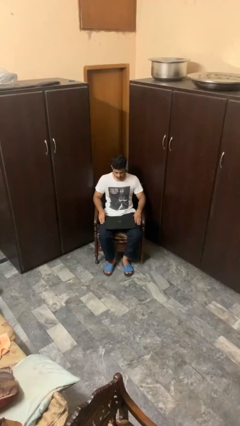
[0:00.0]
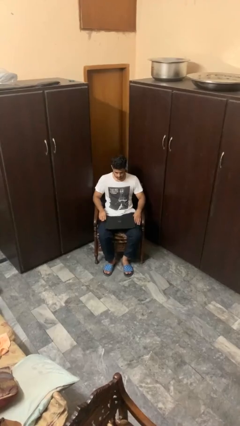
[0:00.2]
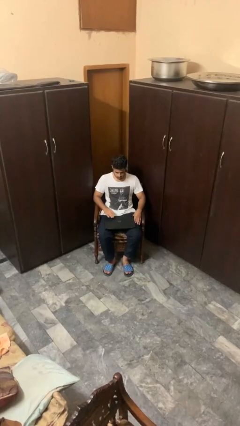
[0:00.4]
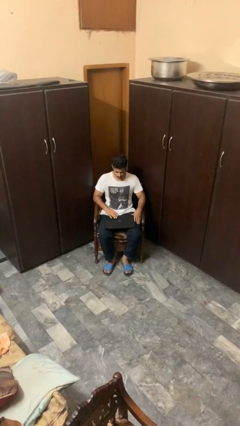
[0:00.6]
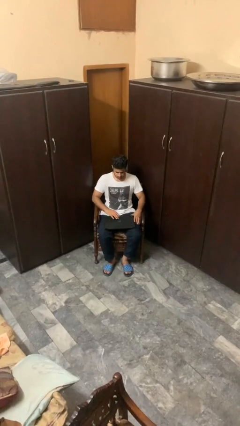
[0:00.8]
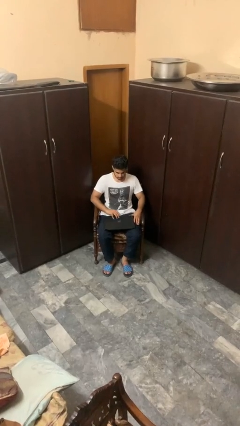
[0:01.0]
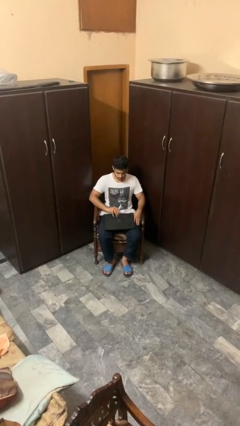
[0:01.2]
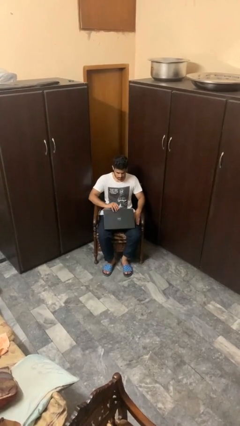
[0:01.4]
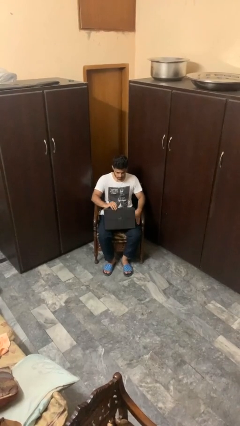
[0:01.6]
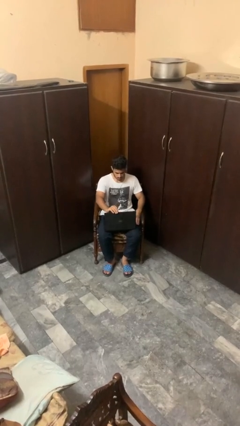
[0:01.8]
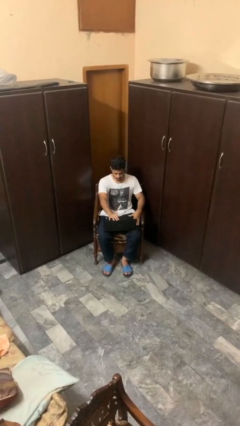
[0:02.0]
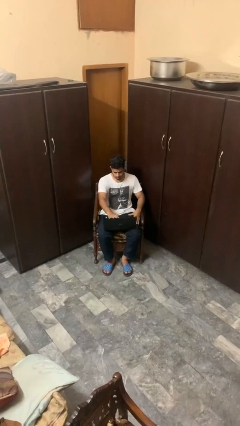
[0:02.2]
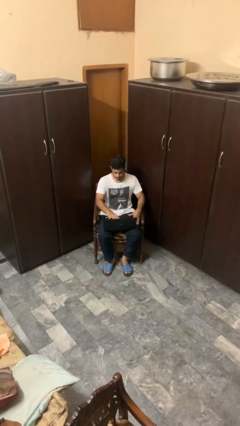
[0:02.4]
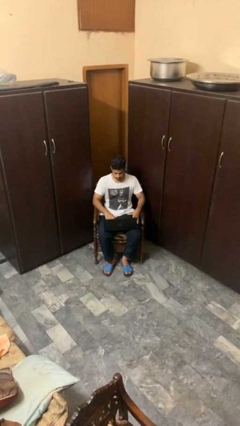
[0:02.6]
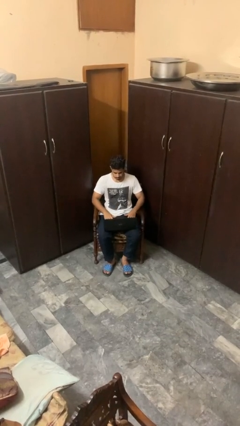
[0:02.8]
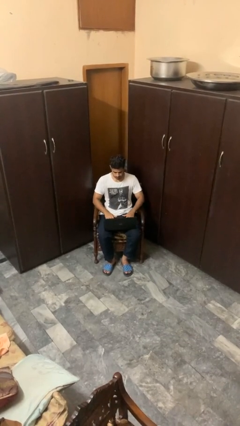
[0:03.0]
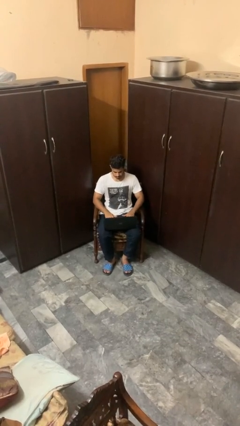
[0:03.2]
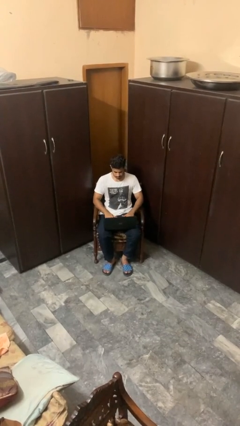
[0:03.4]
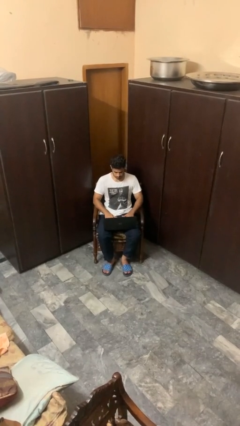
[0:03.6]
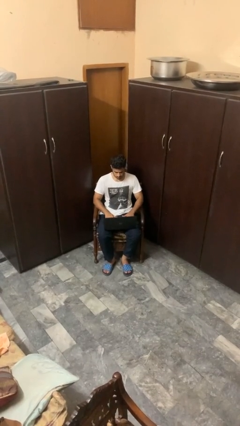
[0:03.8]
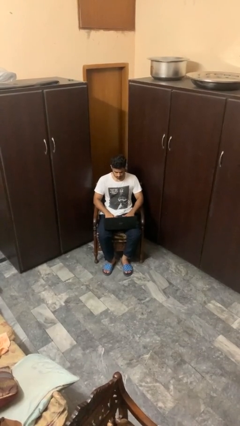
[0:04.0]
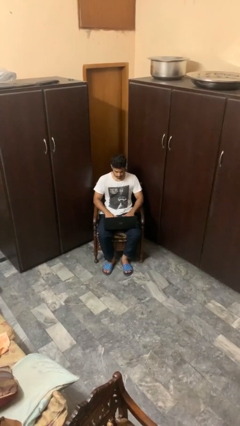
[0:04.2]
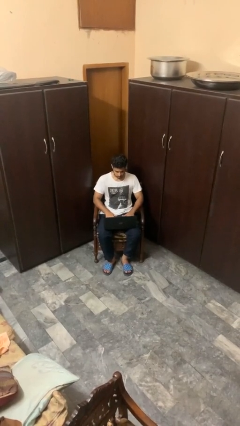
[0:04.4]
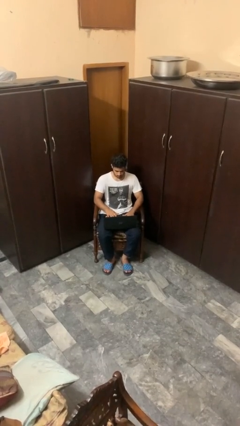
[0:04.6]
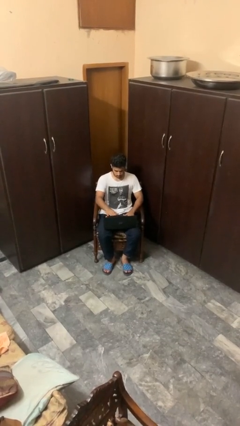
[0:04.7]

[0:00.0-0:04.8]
person opens laptop

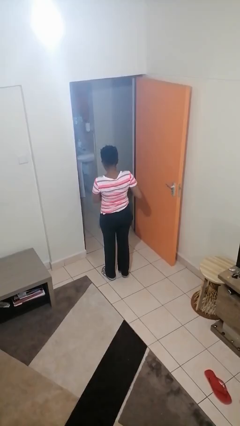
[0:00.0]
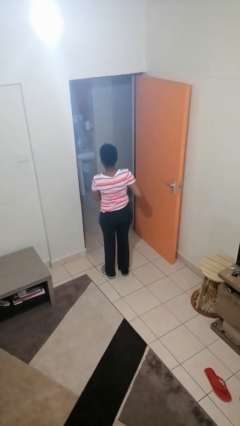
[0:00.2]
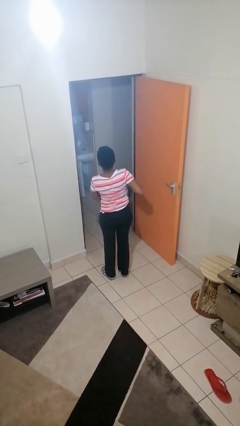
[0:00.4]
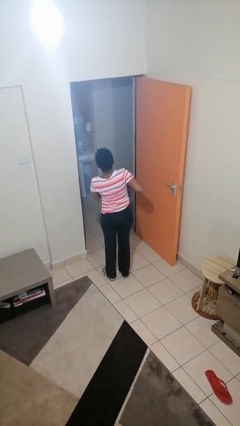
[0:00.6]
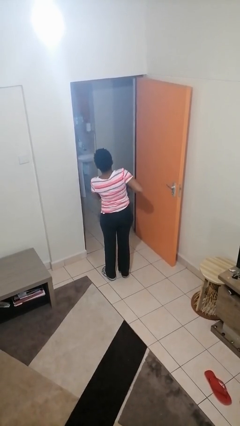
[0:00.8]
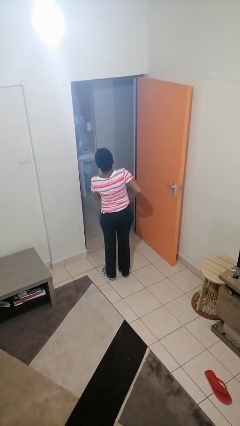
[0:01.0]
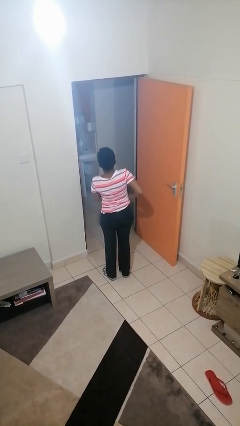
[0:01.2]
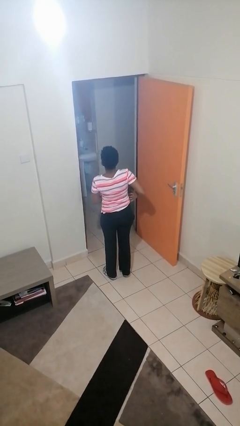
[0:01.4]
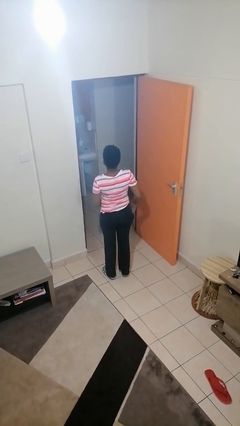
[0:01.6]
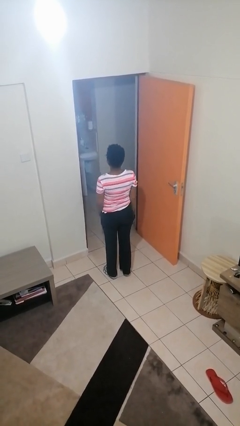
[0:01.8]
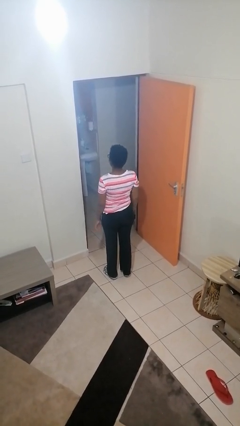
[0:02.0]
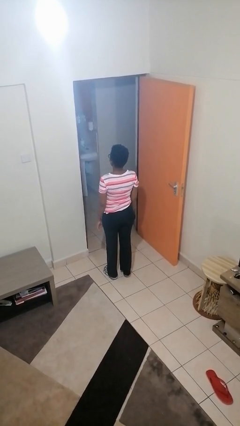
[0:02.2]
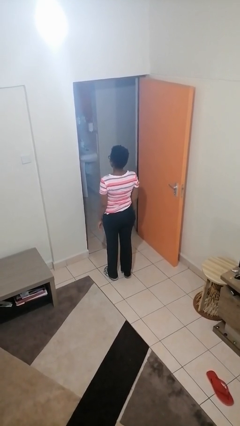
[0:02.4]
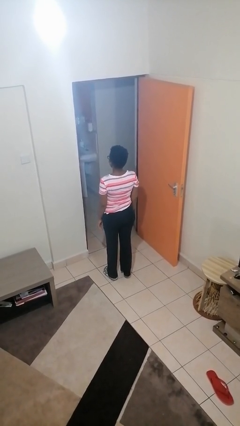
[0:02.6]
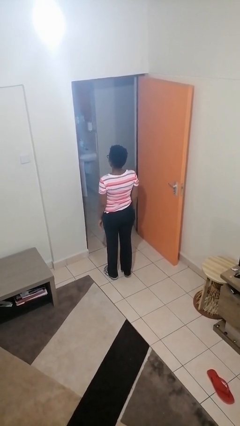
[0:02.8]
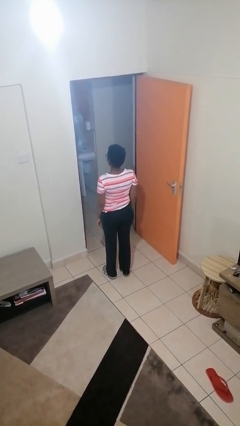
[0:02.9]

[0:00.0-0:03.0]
person puts phone into pocket

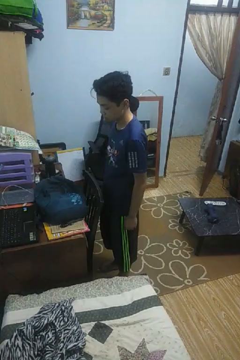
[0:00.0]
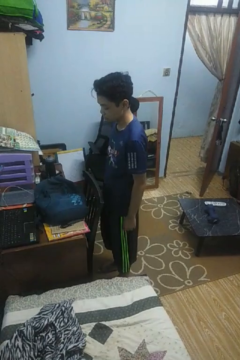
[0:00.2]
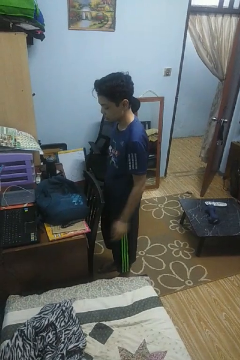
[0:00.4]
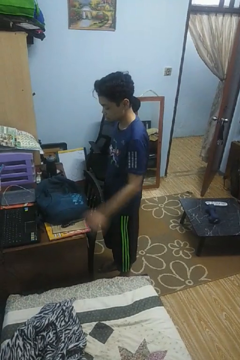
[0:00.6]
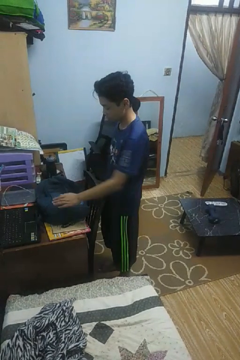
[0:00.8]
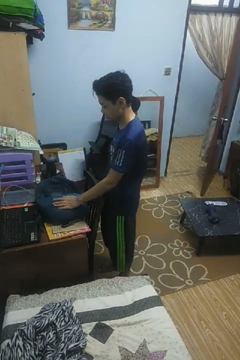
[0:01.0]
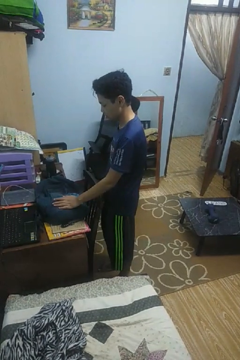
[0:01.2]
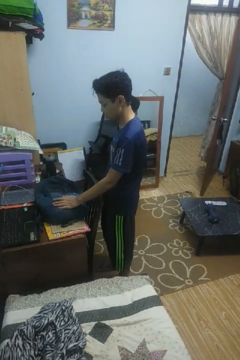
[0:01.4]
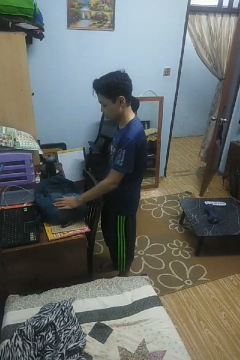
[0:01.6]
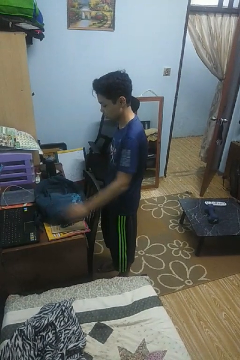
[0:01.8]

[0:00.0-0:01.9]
person taps object with finger

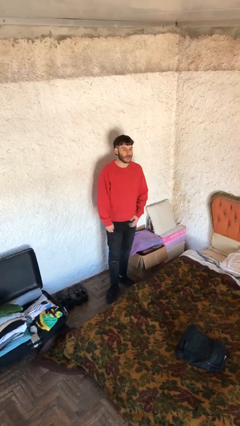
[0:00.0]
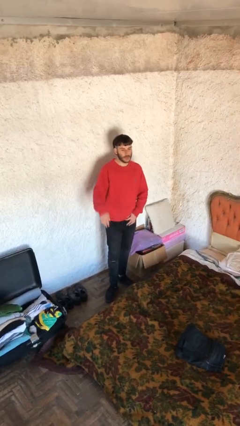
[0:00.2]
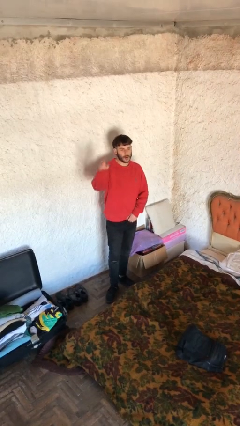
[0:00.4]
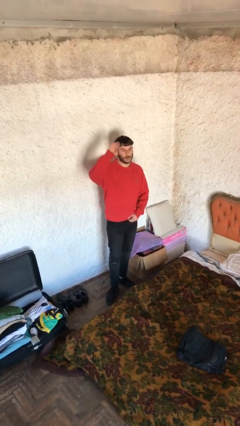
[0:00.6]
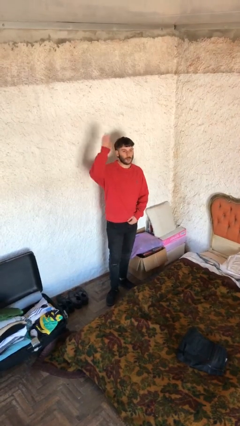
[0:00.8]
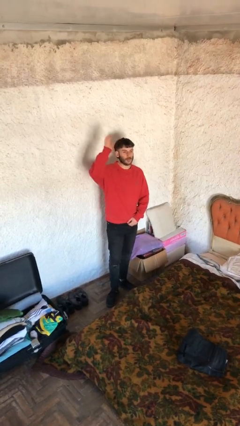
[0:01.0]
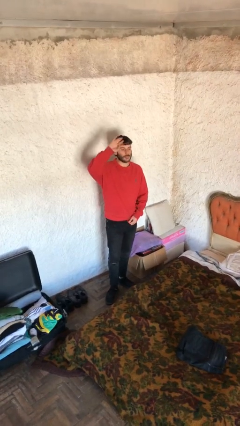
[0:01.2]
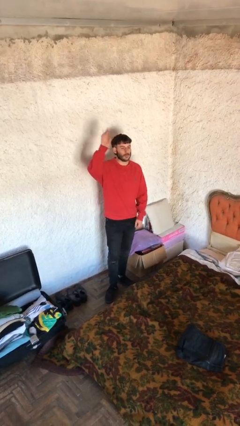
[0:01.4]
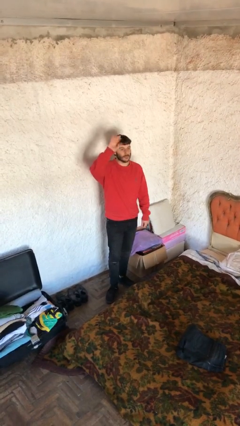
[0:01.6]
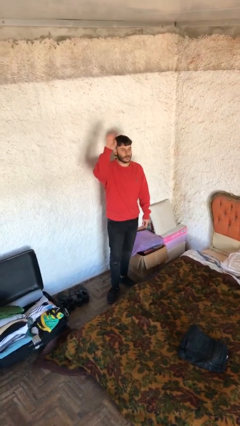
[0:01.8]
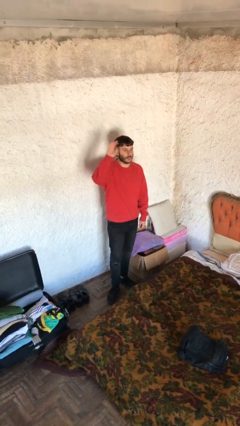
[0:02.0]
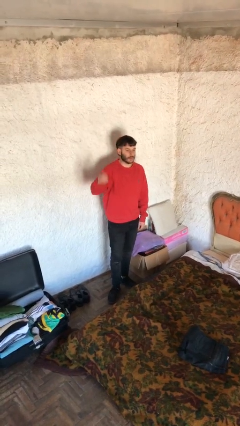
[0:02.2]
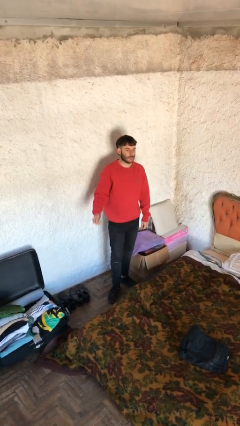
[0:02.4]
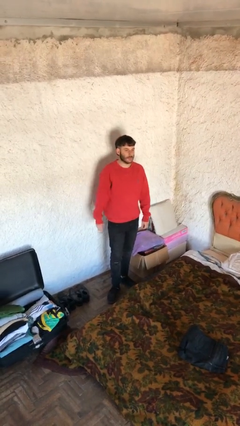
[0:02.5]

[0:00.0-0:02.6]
person waves at person

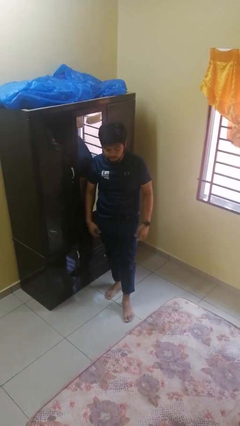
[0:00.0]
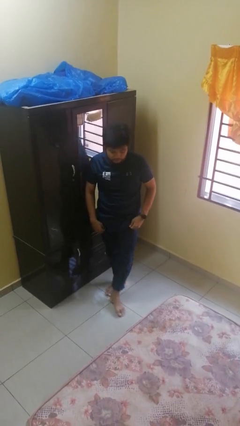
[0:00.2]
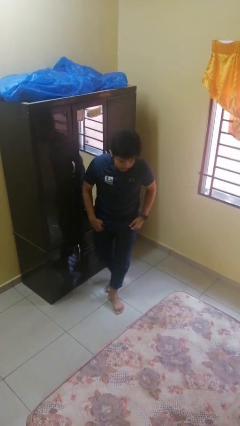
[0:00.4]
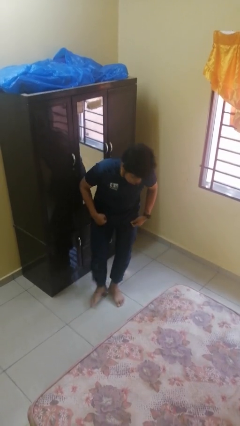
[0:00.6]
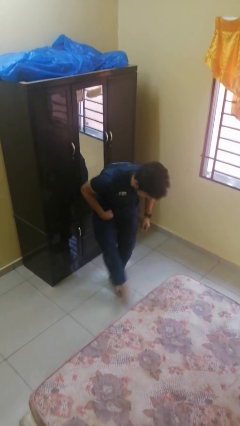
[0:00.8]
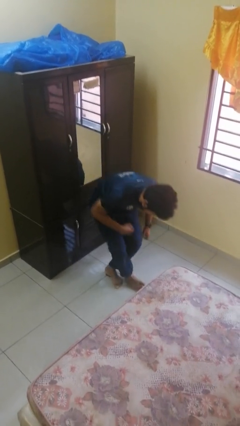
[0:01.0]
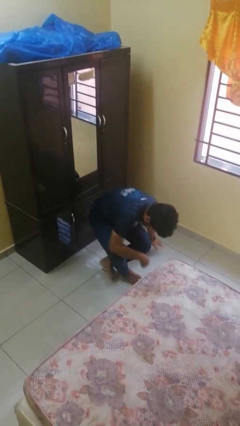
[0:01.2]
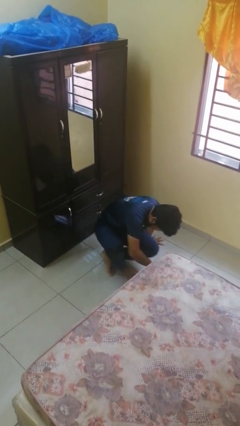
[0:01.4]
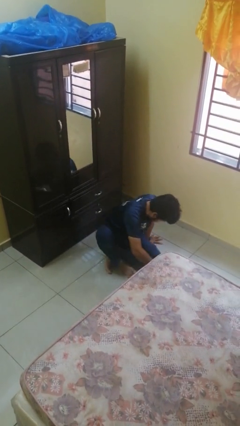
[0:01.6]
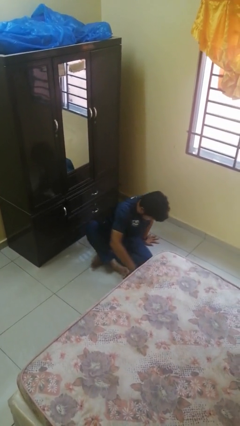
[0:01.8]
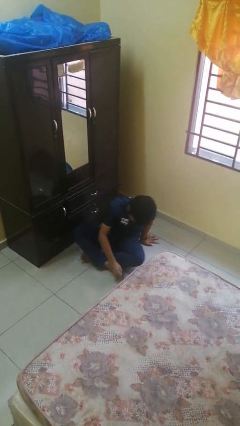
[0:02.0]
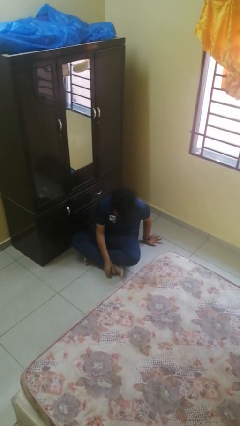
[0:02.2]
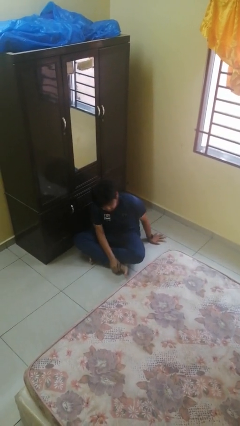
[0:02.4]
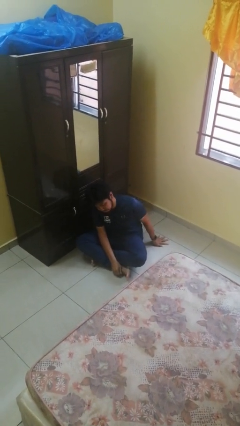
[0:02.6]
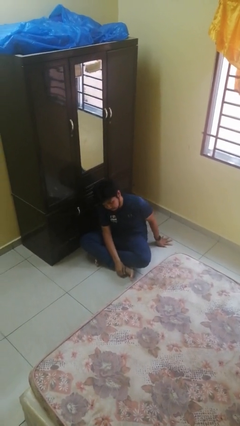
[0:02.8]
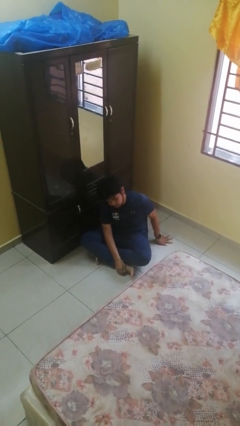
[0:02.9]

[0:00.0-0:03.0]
person sits crisscross

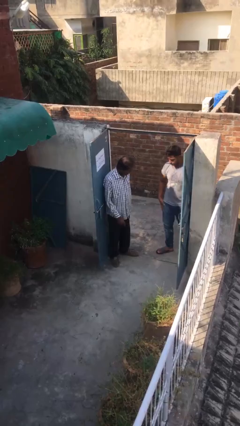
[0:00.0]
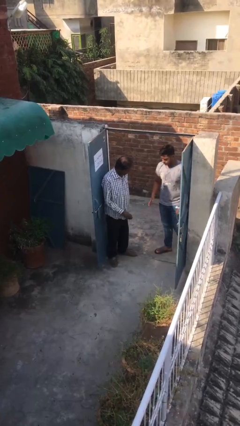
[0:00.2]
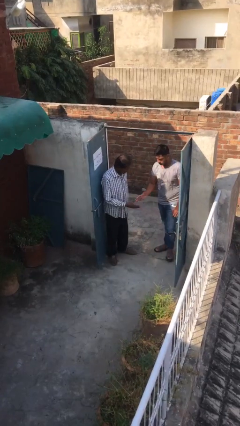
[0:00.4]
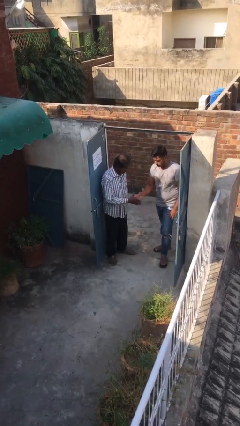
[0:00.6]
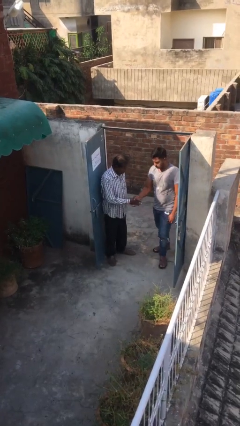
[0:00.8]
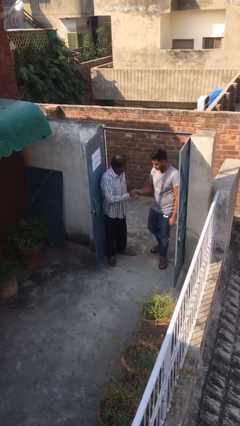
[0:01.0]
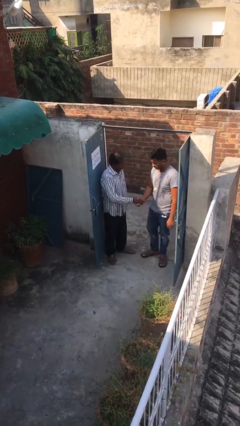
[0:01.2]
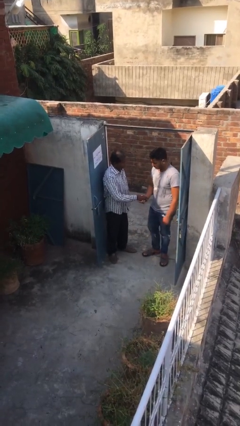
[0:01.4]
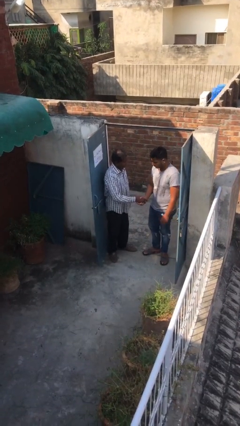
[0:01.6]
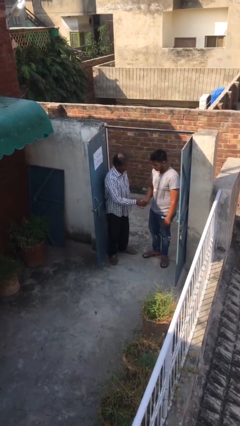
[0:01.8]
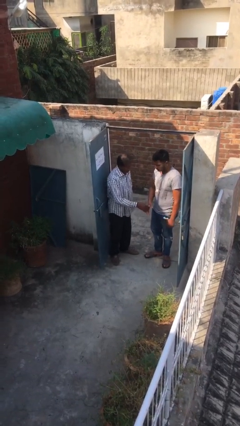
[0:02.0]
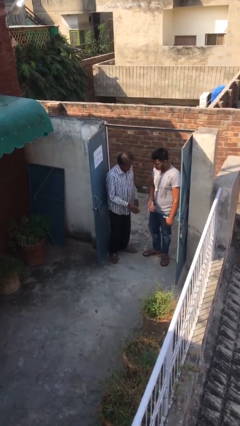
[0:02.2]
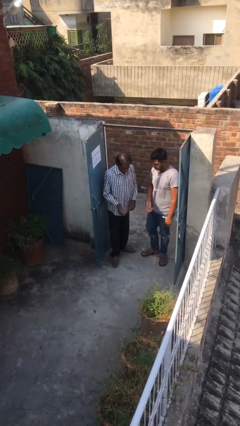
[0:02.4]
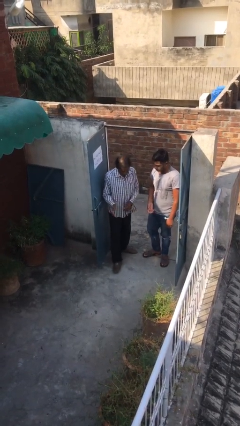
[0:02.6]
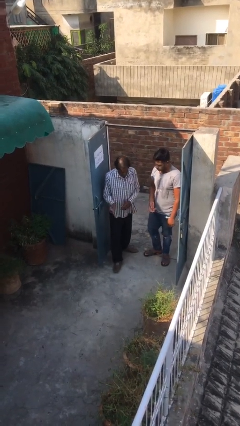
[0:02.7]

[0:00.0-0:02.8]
person shakes hand
